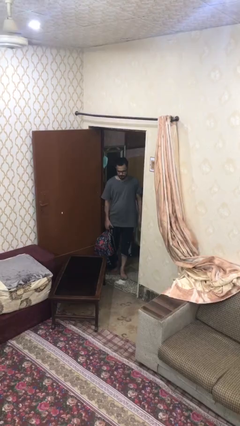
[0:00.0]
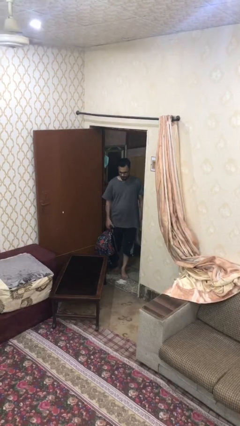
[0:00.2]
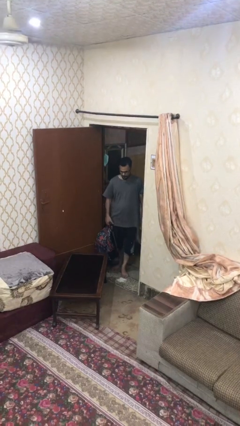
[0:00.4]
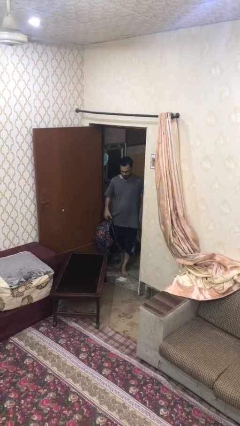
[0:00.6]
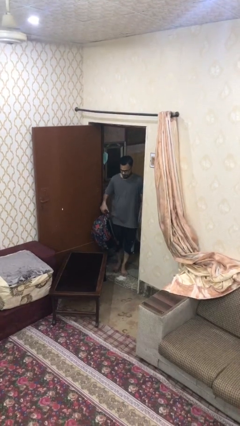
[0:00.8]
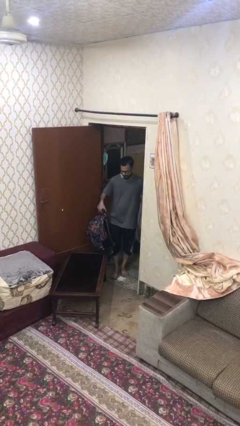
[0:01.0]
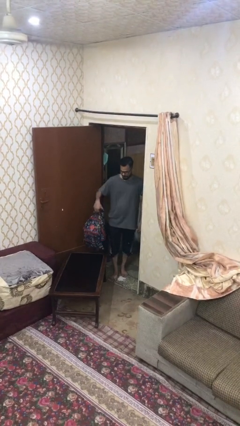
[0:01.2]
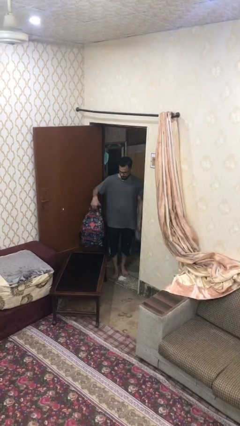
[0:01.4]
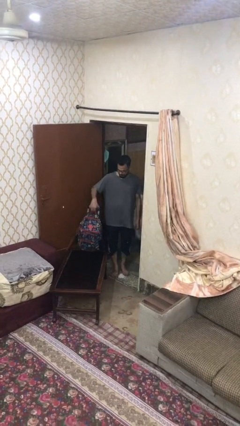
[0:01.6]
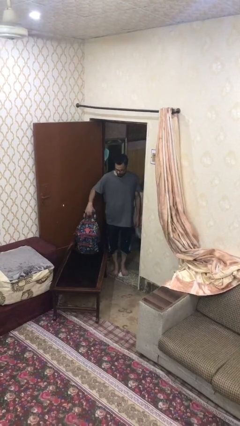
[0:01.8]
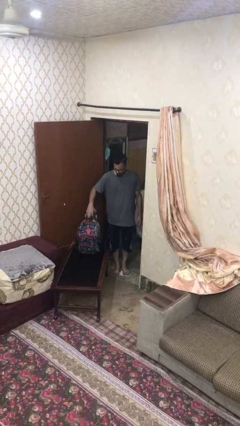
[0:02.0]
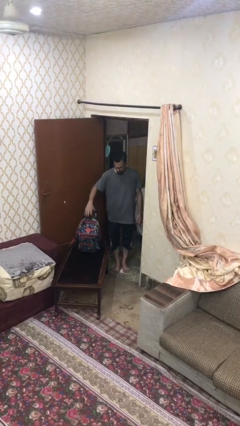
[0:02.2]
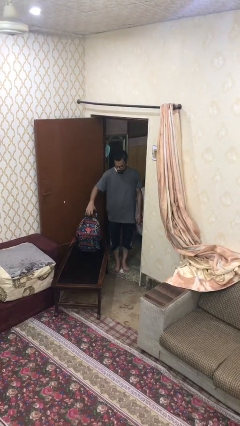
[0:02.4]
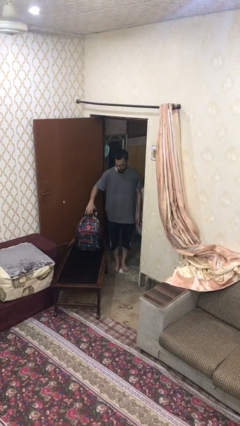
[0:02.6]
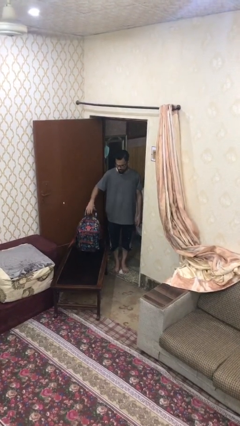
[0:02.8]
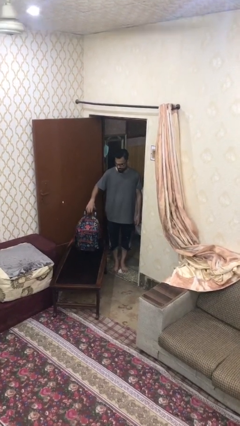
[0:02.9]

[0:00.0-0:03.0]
person puts down object on table

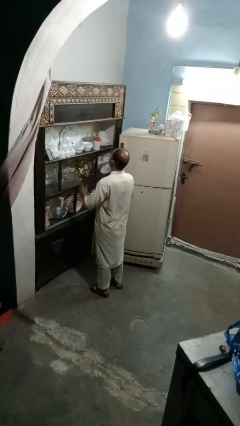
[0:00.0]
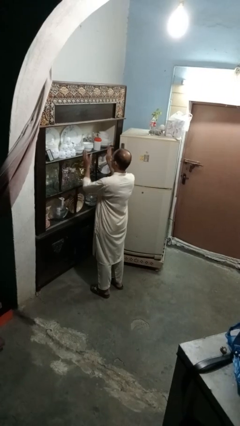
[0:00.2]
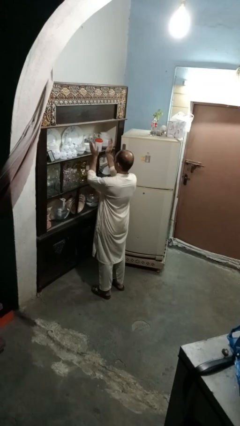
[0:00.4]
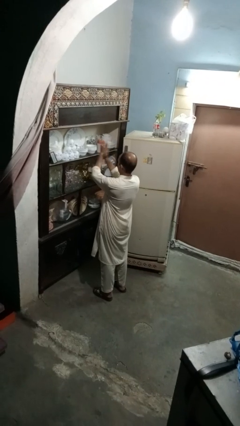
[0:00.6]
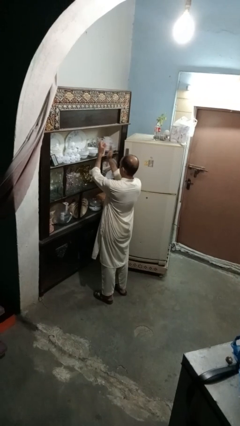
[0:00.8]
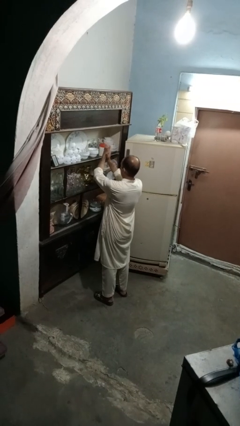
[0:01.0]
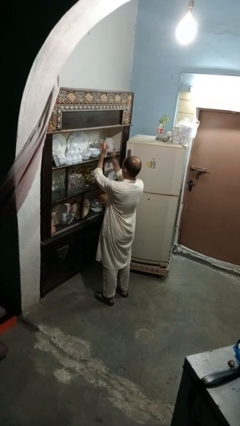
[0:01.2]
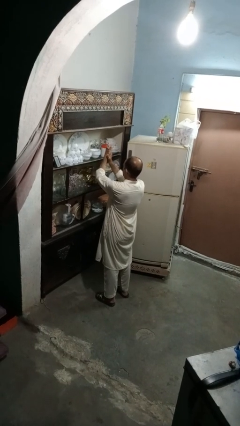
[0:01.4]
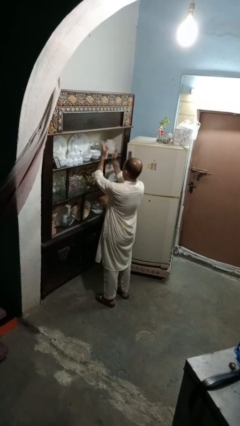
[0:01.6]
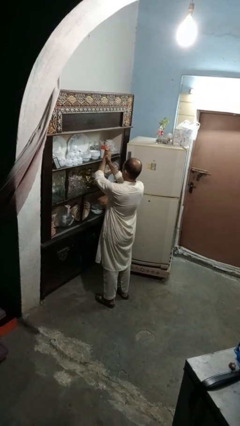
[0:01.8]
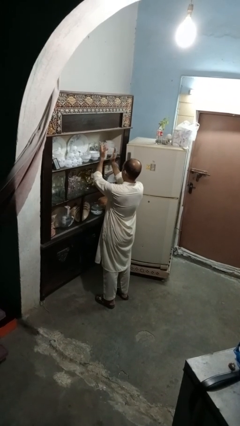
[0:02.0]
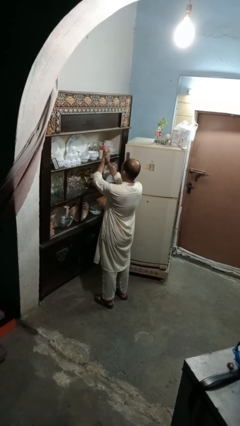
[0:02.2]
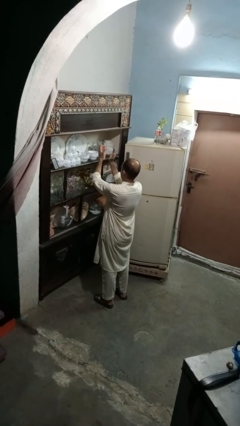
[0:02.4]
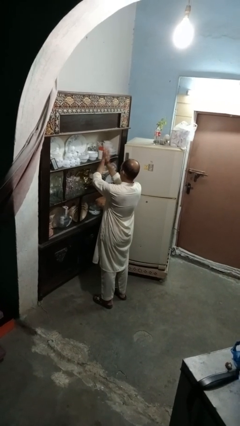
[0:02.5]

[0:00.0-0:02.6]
person claps hands

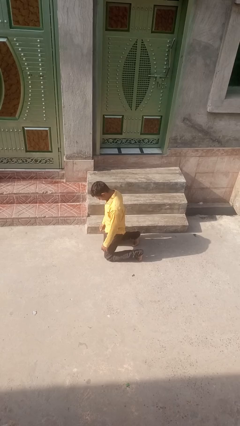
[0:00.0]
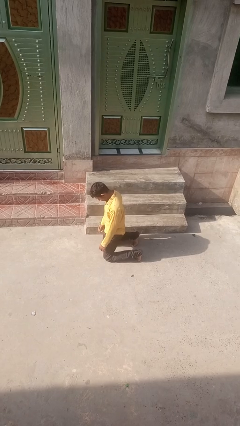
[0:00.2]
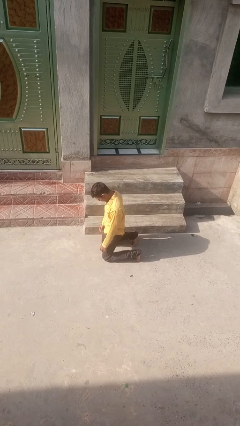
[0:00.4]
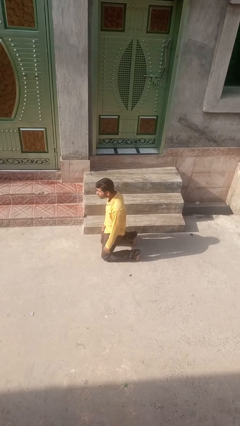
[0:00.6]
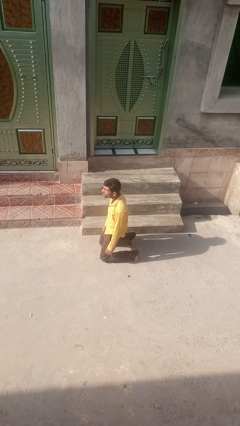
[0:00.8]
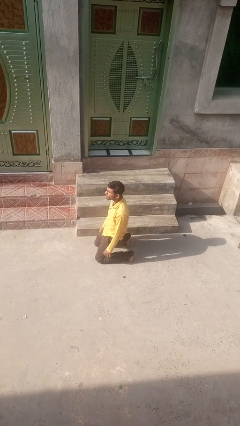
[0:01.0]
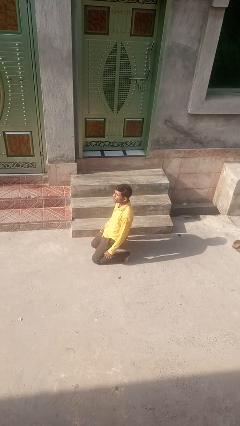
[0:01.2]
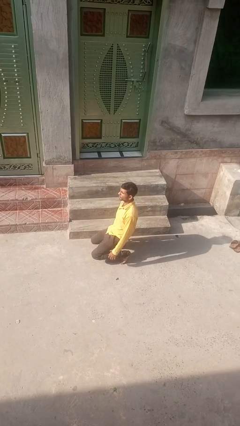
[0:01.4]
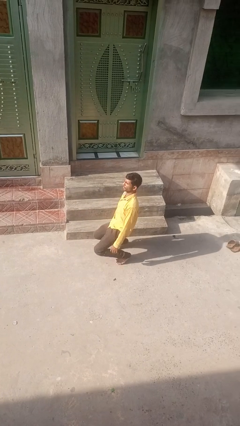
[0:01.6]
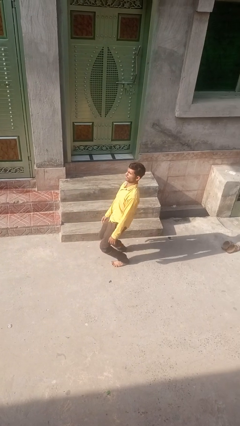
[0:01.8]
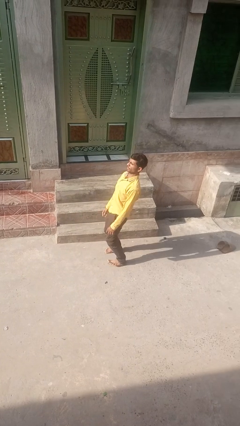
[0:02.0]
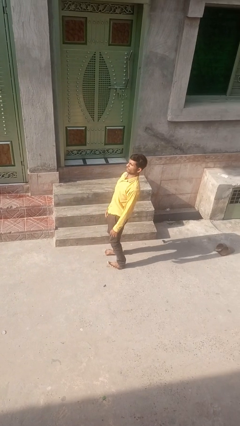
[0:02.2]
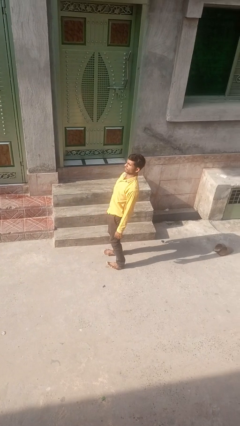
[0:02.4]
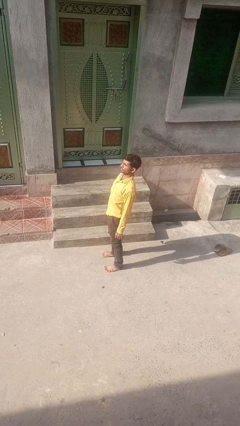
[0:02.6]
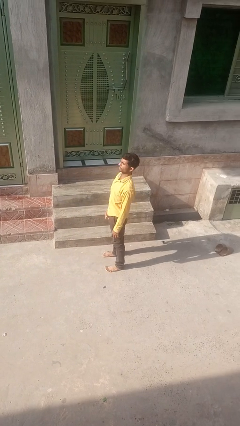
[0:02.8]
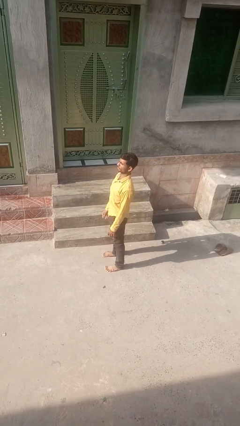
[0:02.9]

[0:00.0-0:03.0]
person stands up from floor

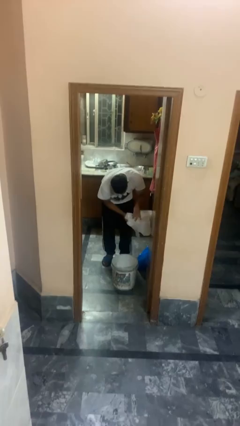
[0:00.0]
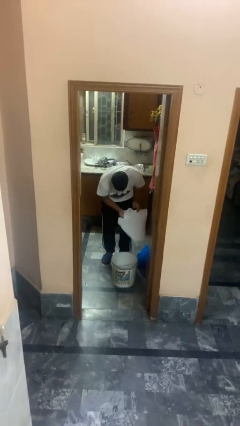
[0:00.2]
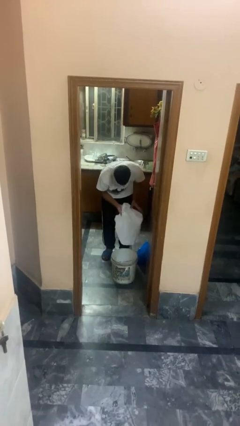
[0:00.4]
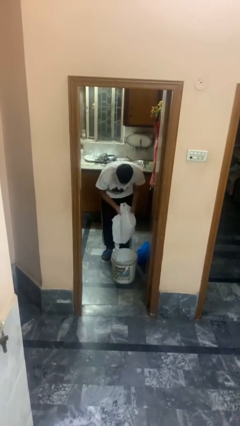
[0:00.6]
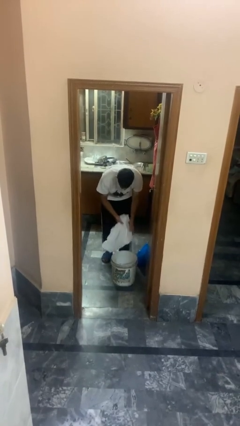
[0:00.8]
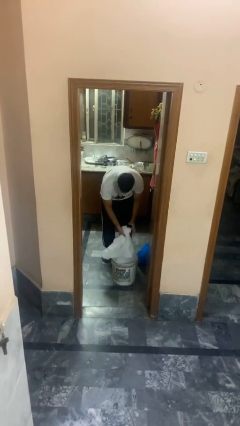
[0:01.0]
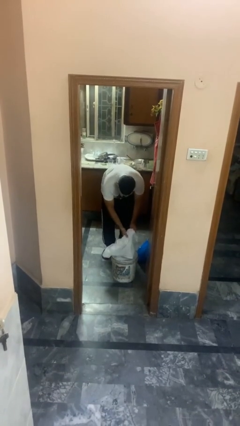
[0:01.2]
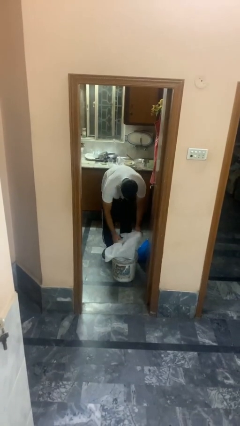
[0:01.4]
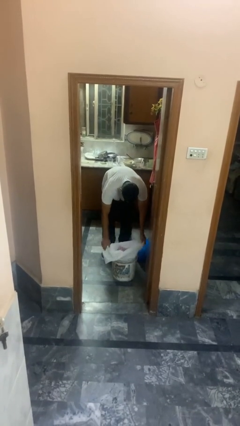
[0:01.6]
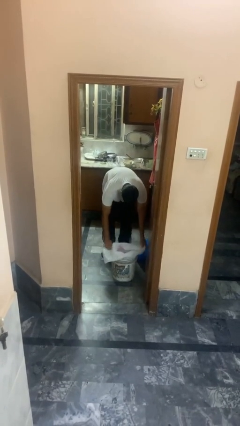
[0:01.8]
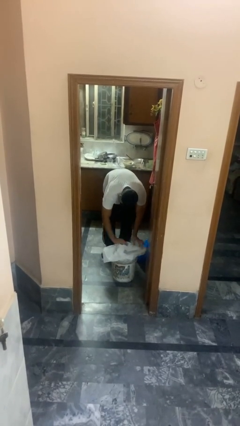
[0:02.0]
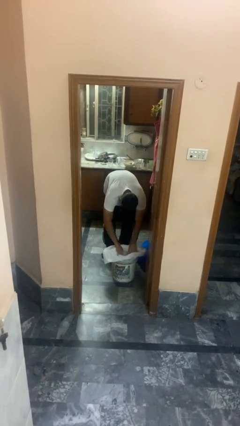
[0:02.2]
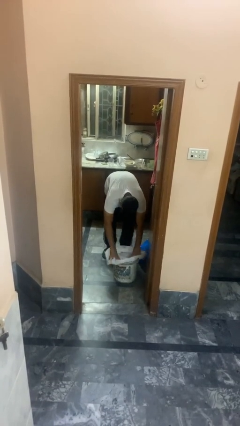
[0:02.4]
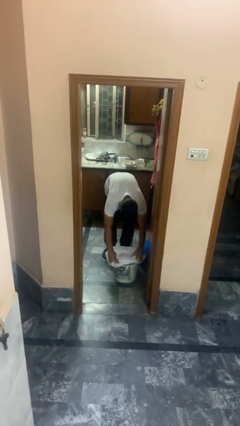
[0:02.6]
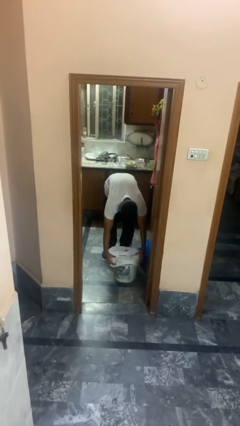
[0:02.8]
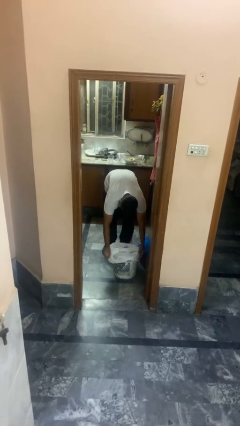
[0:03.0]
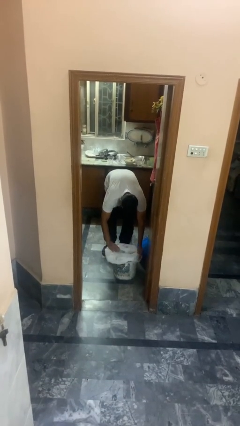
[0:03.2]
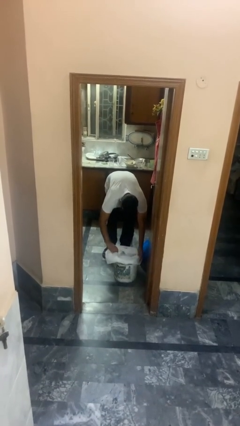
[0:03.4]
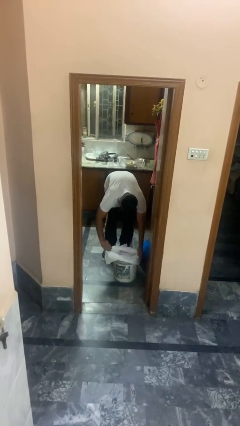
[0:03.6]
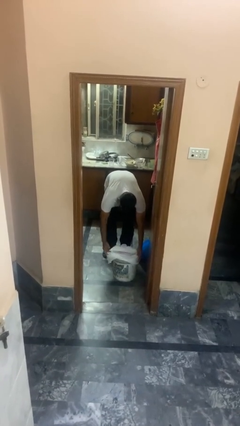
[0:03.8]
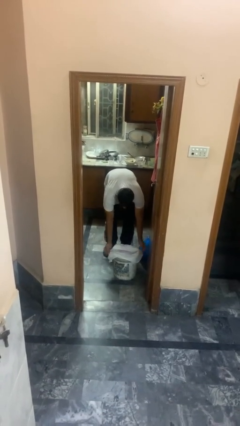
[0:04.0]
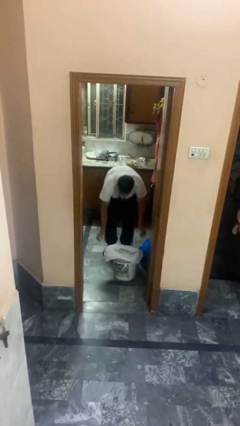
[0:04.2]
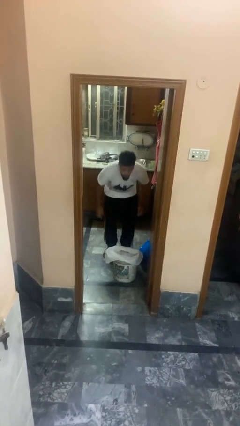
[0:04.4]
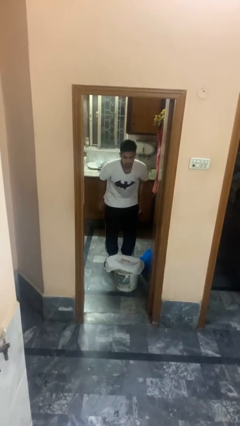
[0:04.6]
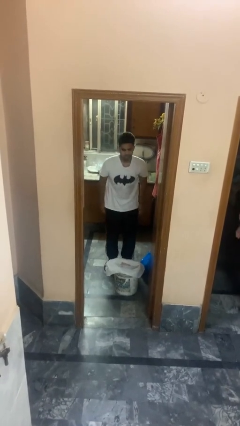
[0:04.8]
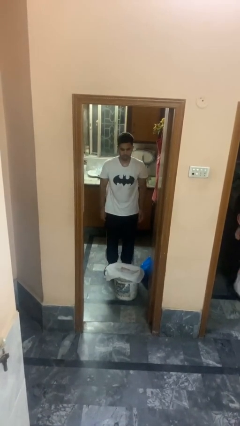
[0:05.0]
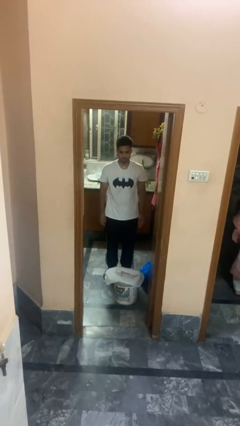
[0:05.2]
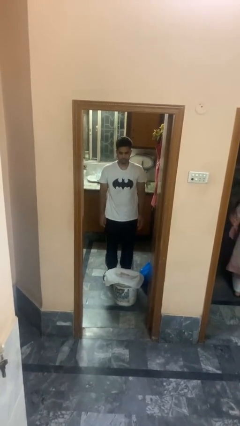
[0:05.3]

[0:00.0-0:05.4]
person inserts trashbag into trashcan

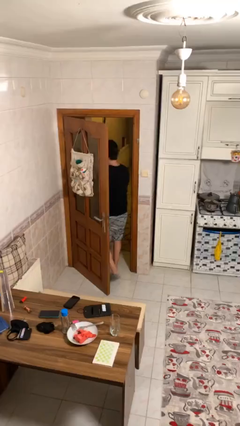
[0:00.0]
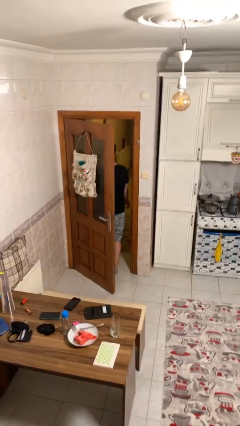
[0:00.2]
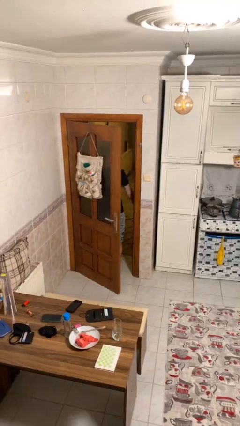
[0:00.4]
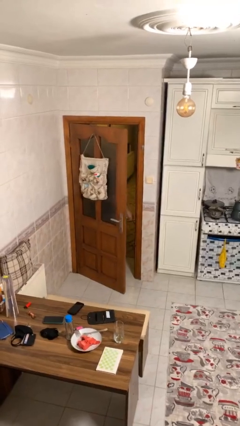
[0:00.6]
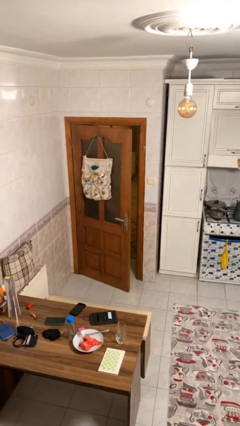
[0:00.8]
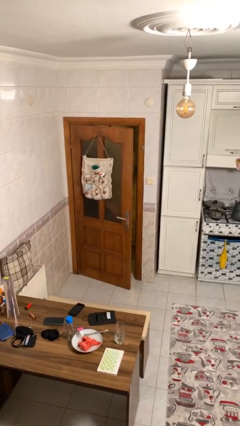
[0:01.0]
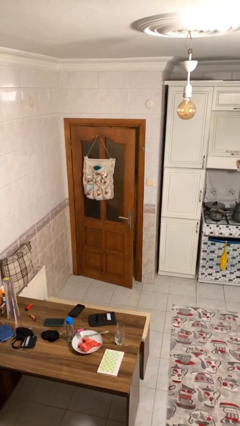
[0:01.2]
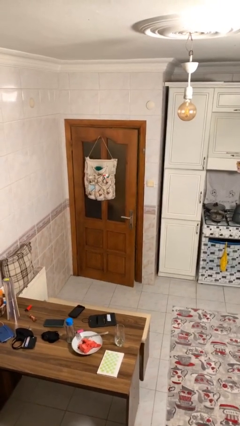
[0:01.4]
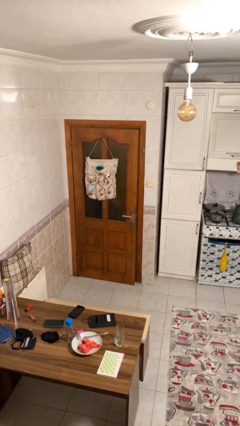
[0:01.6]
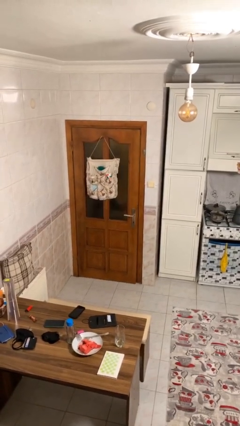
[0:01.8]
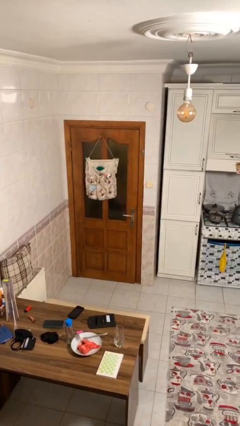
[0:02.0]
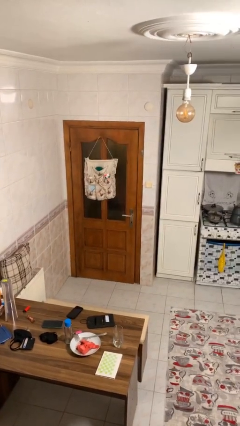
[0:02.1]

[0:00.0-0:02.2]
person closes facility door

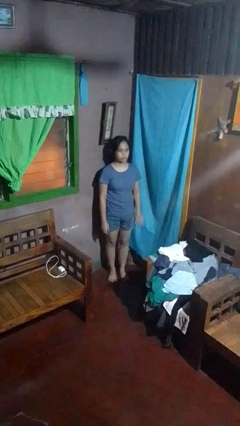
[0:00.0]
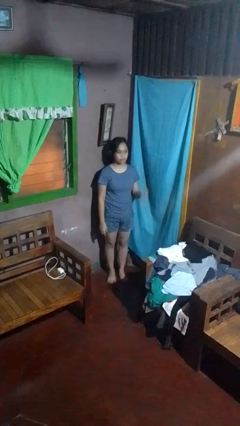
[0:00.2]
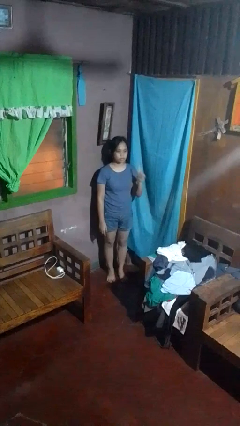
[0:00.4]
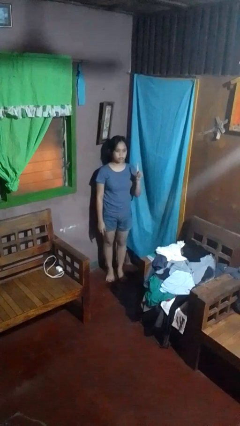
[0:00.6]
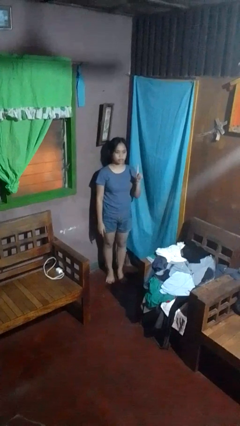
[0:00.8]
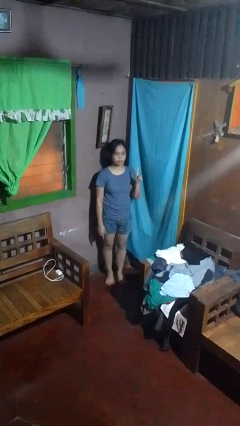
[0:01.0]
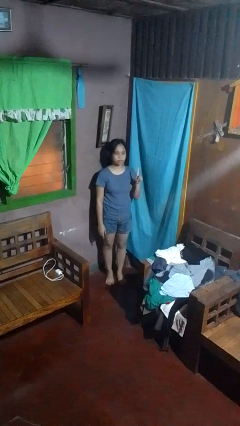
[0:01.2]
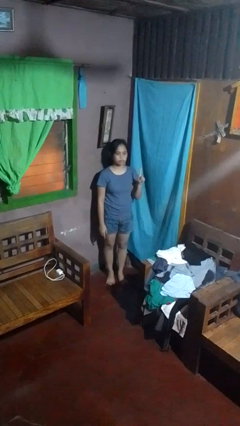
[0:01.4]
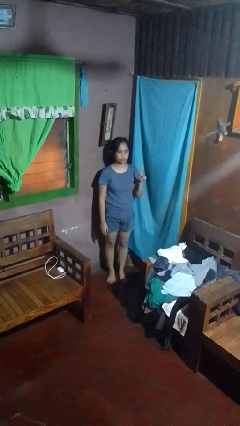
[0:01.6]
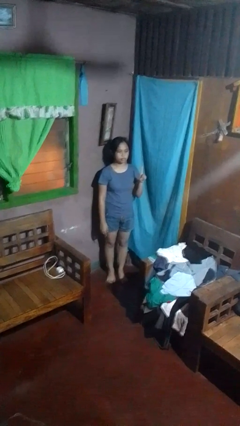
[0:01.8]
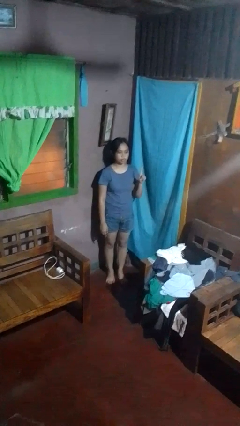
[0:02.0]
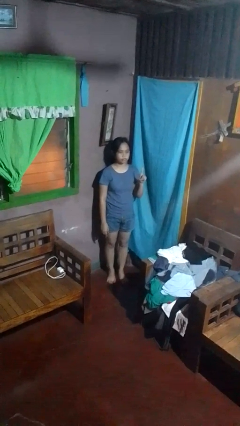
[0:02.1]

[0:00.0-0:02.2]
person gestures number one
